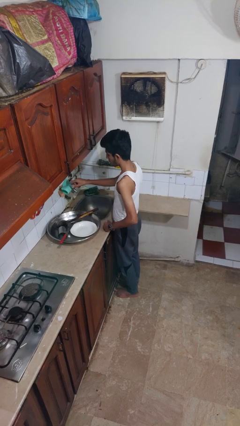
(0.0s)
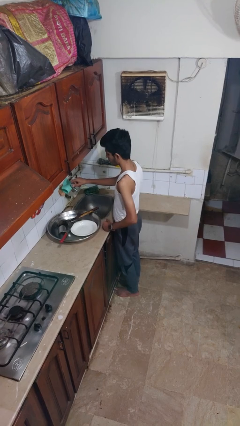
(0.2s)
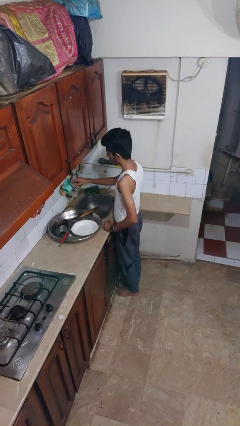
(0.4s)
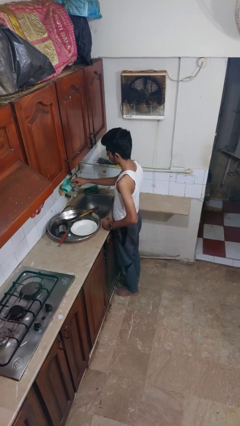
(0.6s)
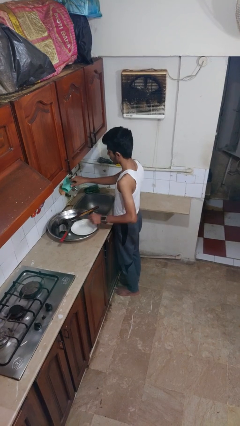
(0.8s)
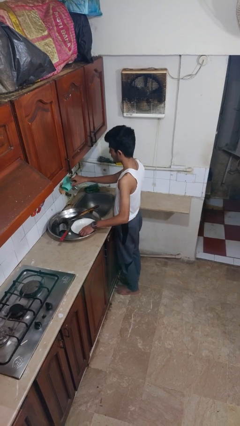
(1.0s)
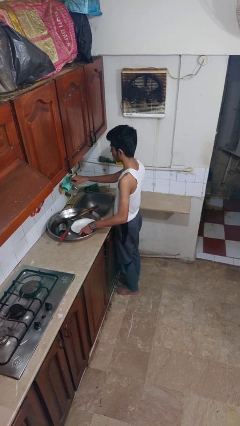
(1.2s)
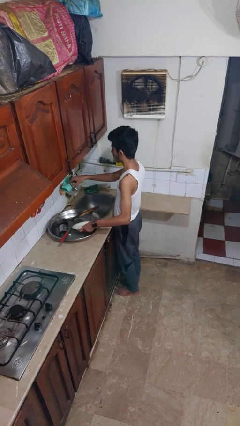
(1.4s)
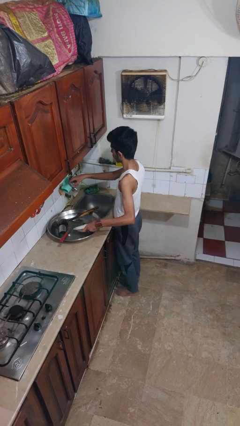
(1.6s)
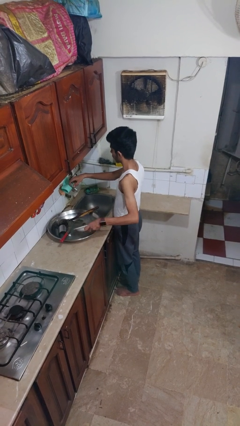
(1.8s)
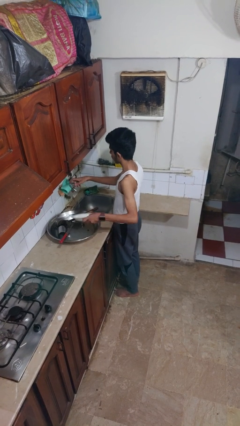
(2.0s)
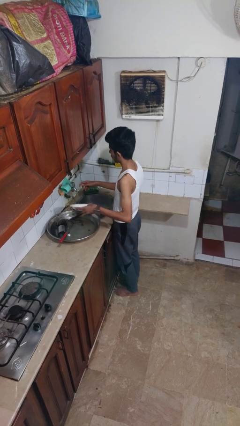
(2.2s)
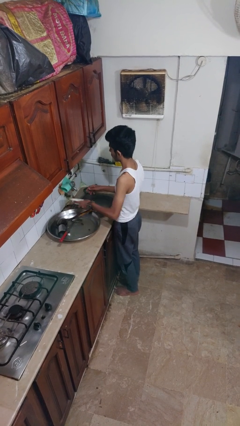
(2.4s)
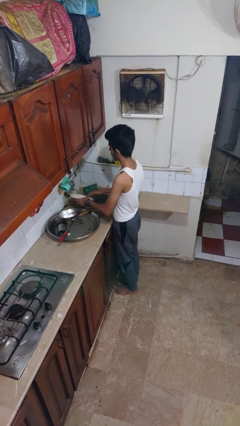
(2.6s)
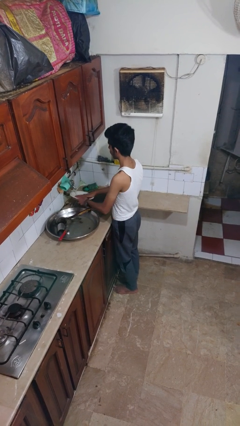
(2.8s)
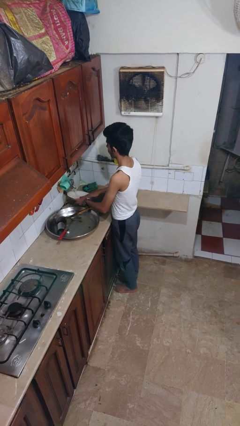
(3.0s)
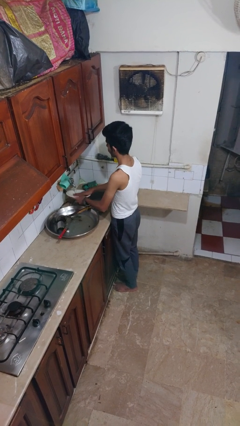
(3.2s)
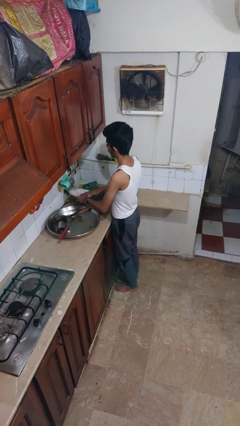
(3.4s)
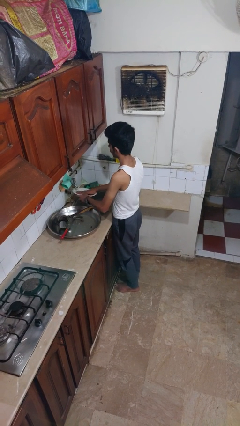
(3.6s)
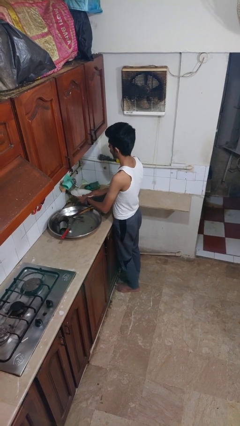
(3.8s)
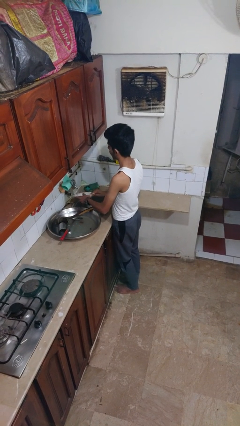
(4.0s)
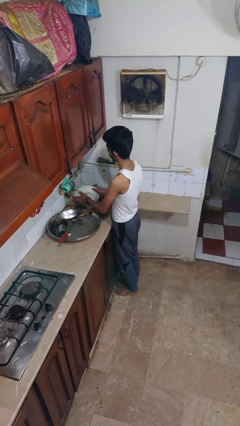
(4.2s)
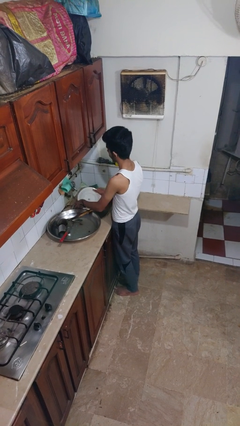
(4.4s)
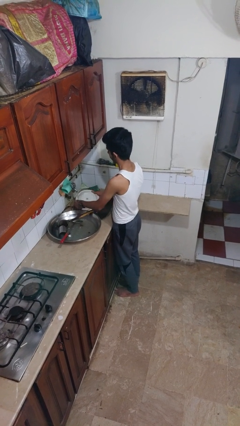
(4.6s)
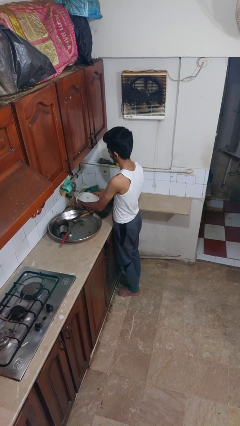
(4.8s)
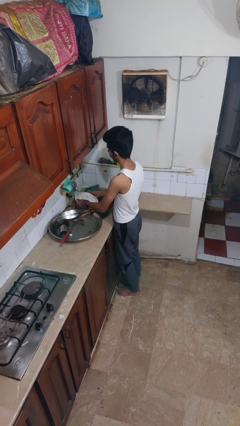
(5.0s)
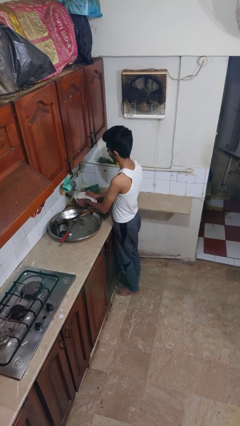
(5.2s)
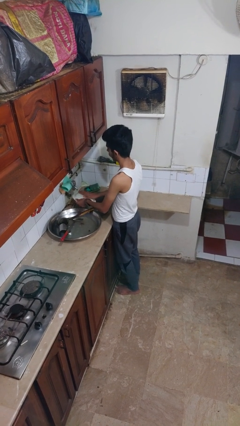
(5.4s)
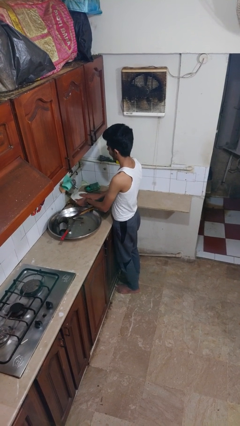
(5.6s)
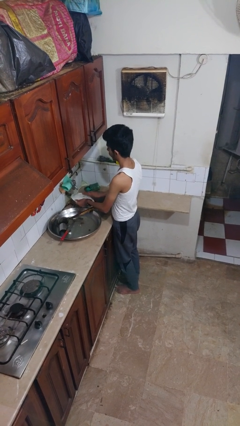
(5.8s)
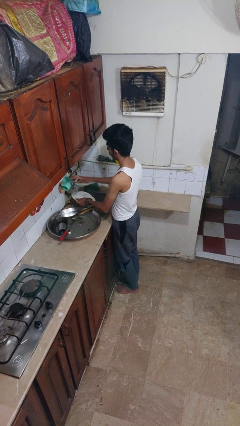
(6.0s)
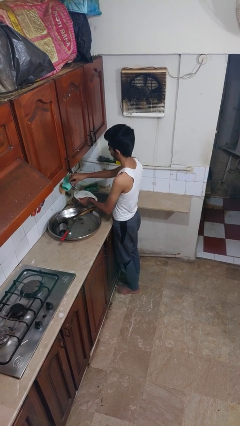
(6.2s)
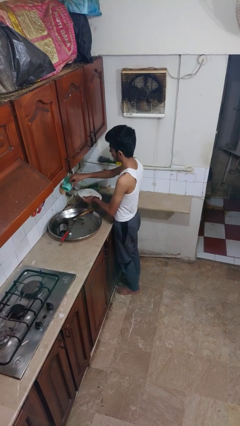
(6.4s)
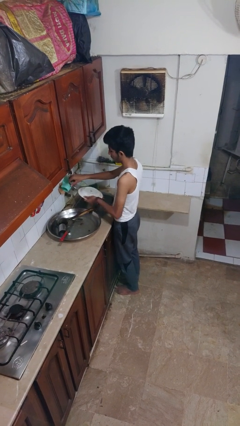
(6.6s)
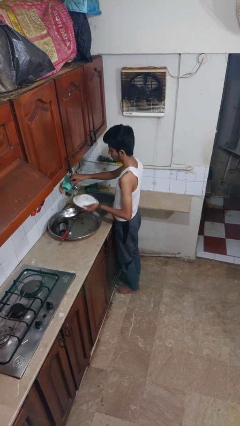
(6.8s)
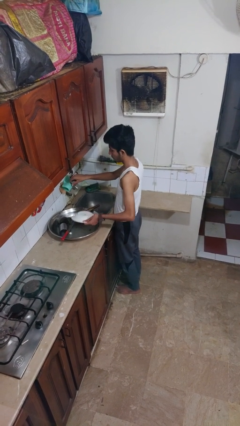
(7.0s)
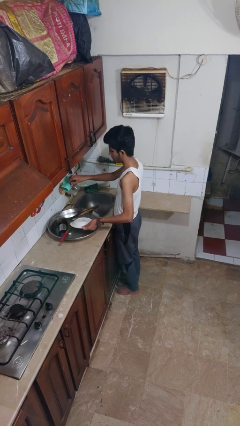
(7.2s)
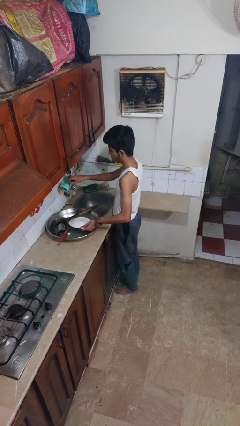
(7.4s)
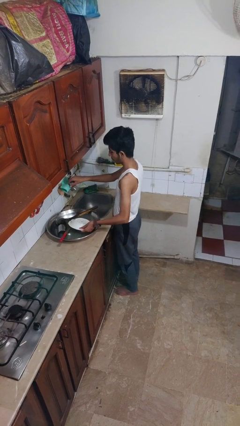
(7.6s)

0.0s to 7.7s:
person washes dish

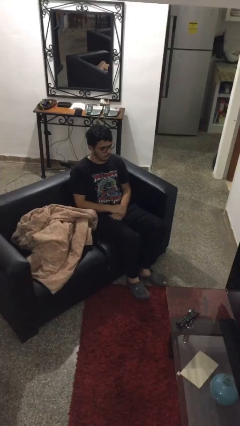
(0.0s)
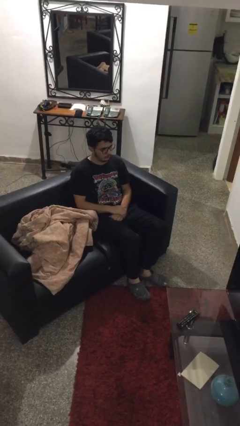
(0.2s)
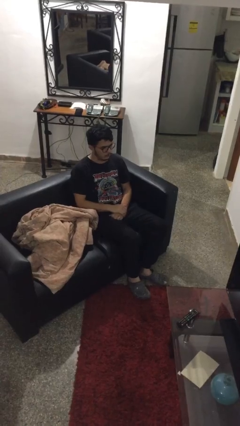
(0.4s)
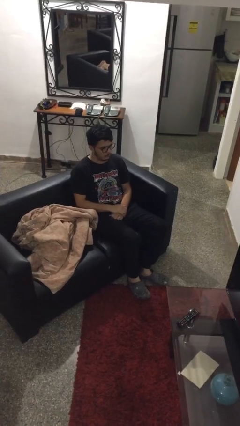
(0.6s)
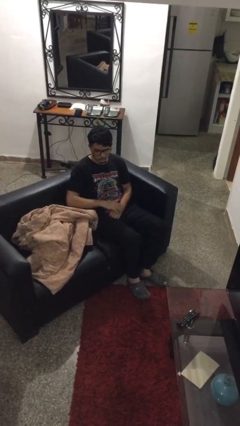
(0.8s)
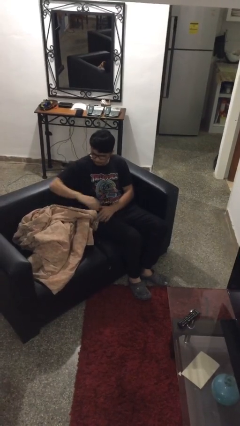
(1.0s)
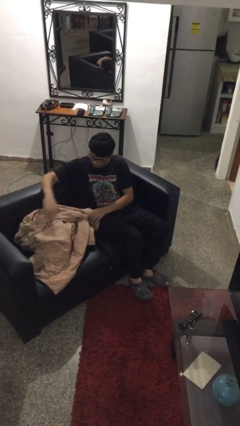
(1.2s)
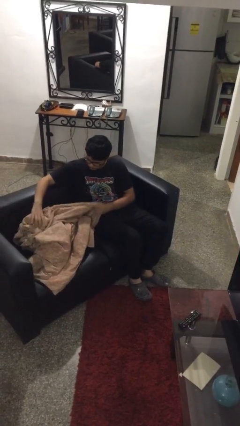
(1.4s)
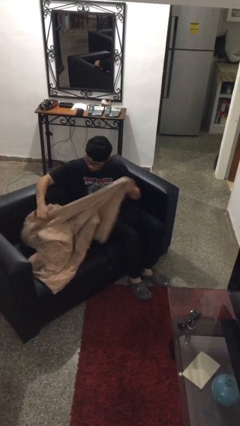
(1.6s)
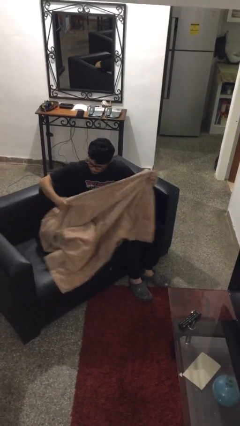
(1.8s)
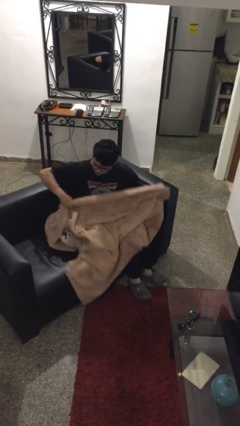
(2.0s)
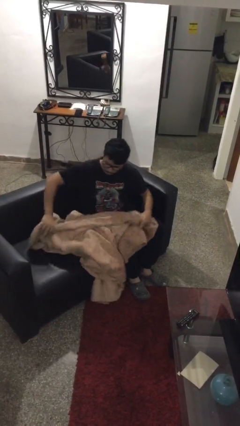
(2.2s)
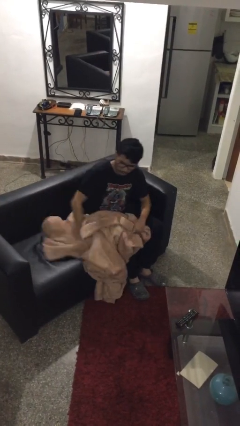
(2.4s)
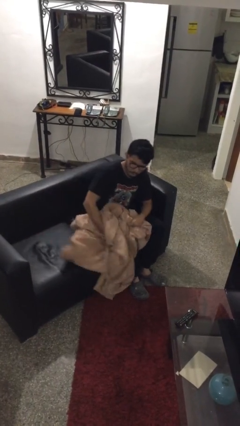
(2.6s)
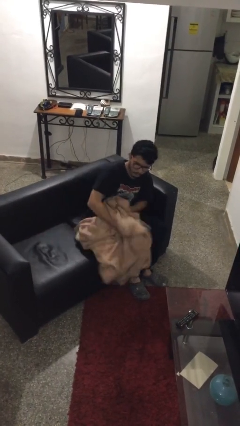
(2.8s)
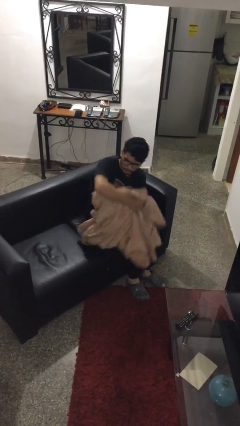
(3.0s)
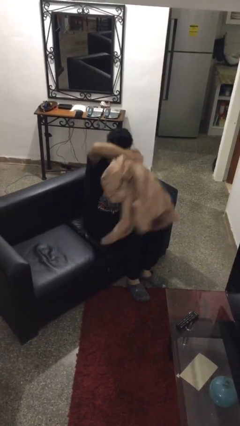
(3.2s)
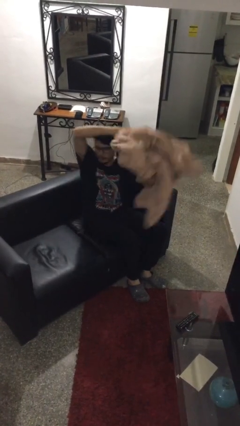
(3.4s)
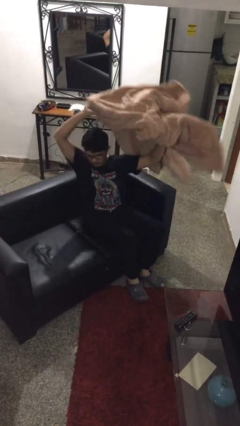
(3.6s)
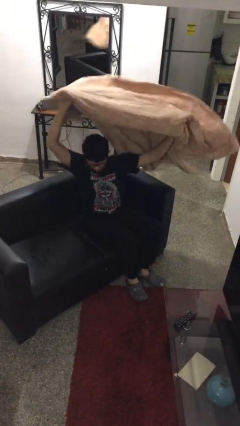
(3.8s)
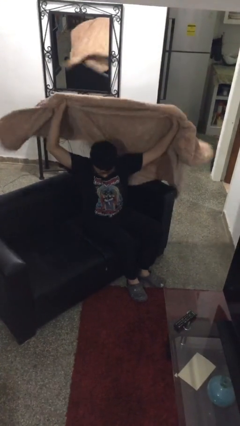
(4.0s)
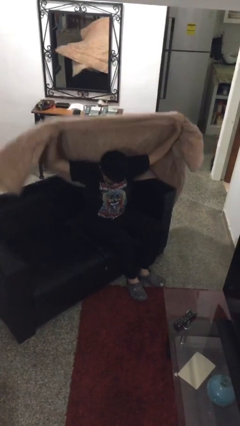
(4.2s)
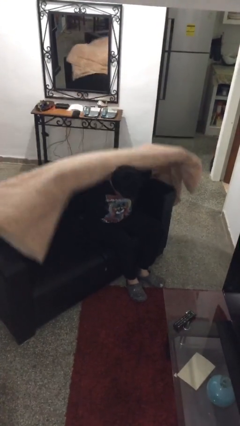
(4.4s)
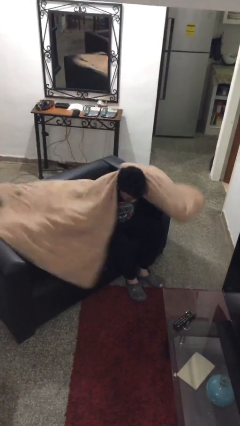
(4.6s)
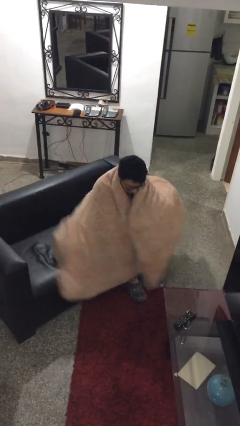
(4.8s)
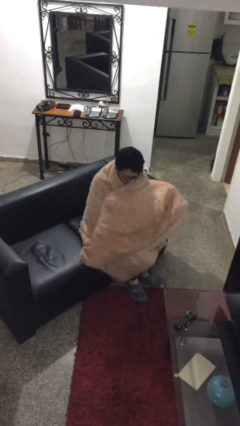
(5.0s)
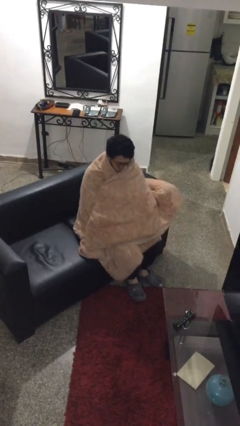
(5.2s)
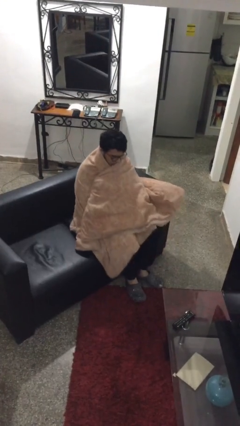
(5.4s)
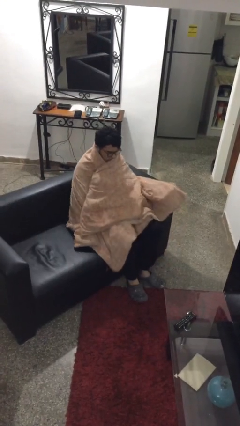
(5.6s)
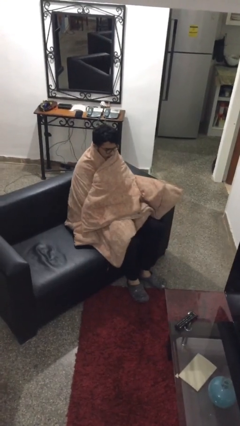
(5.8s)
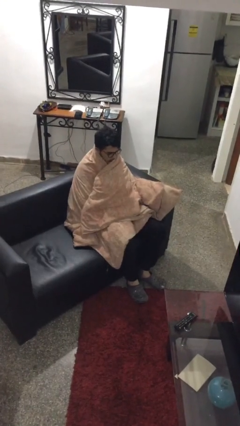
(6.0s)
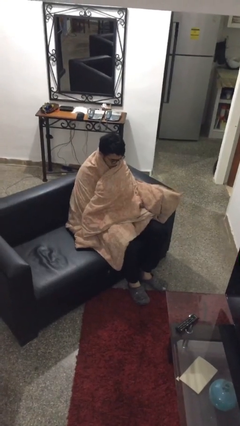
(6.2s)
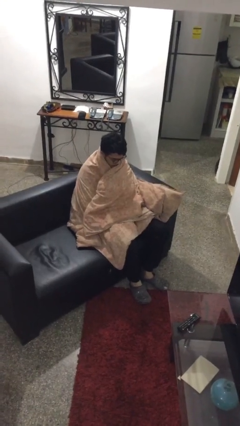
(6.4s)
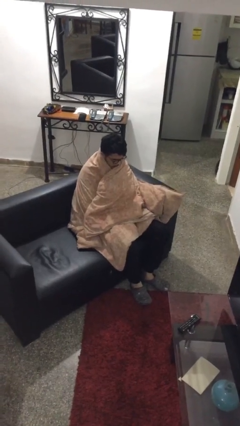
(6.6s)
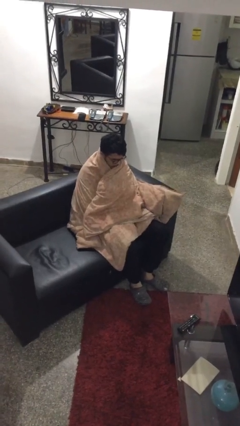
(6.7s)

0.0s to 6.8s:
person covers with blanket

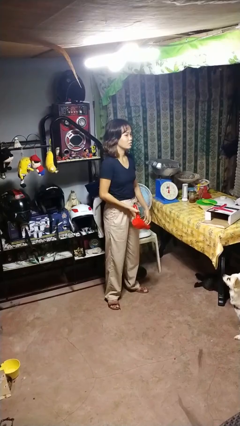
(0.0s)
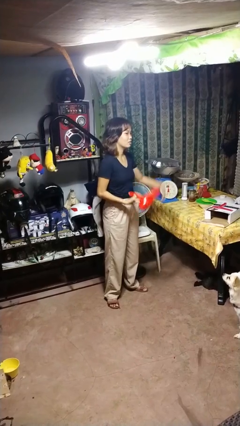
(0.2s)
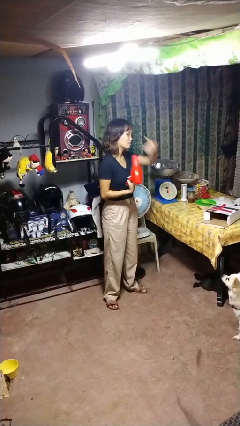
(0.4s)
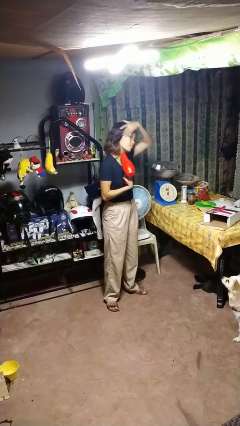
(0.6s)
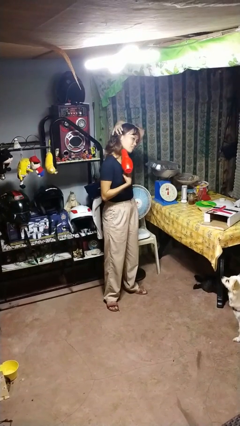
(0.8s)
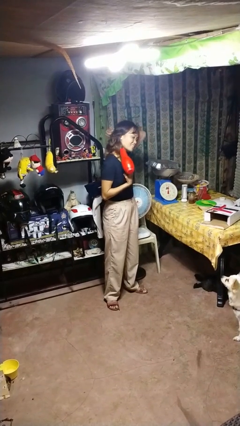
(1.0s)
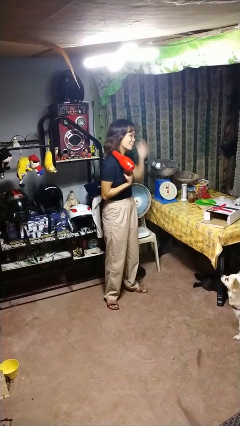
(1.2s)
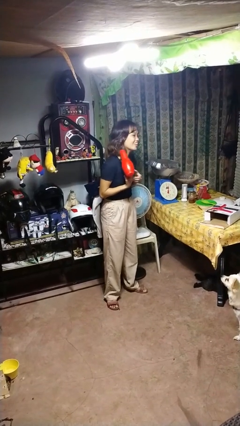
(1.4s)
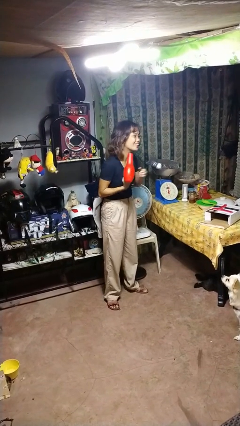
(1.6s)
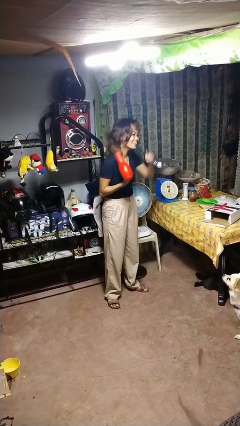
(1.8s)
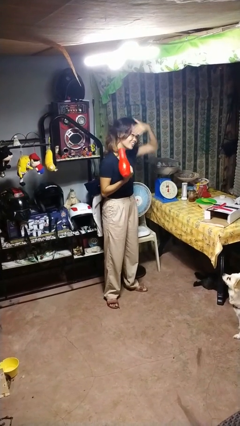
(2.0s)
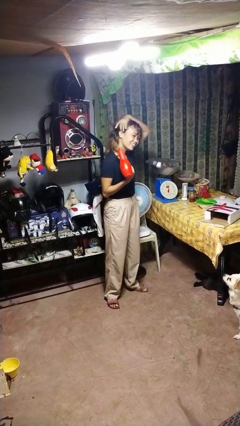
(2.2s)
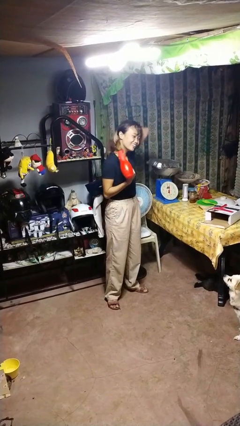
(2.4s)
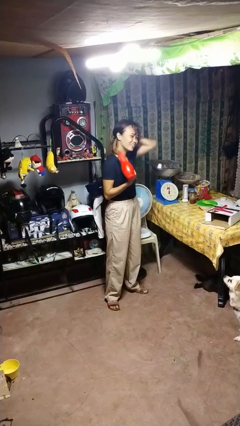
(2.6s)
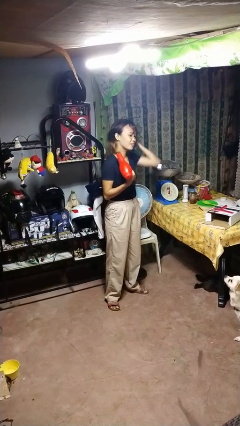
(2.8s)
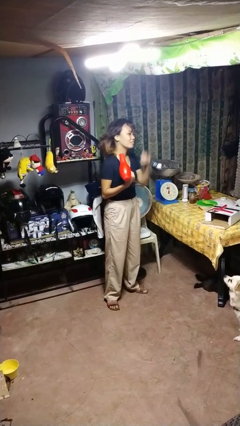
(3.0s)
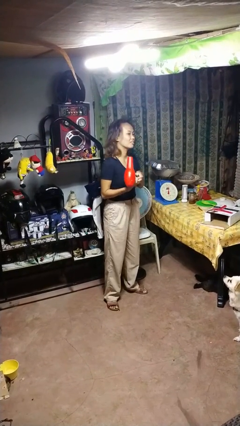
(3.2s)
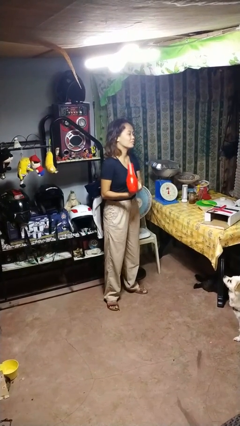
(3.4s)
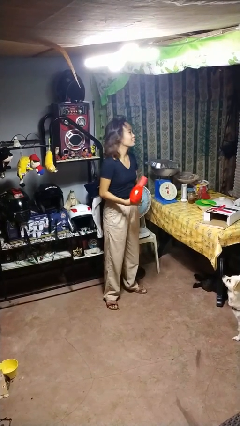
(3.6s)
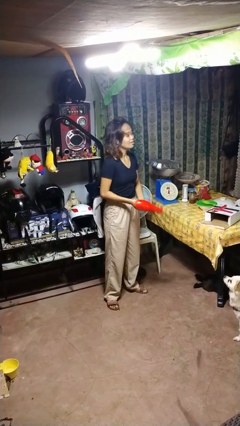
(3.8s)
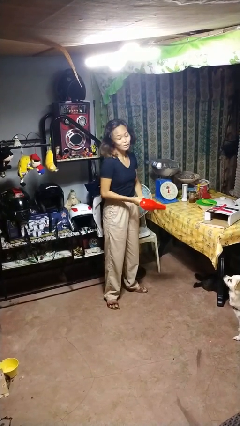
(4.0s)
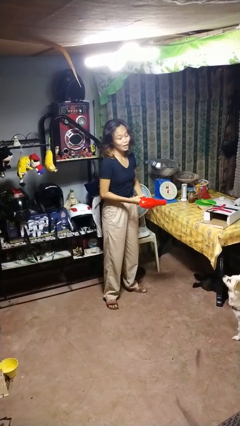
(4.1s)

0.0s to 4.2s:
person dries hair with hairdryer
